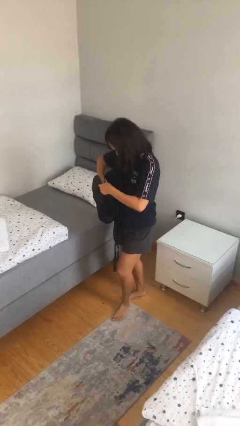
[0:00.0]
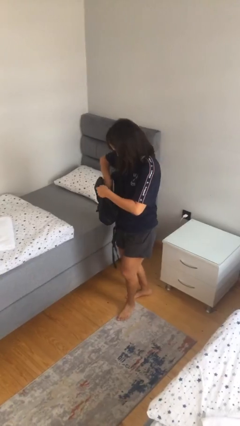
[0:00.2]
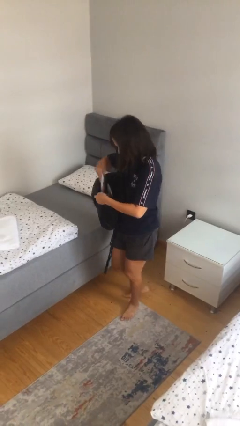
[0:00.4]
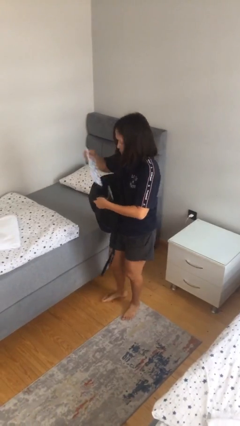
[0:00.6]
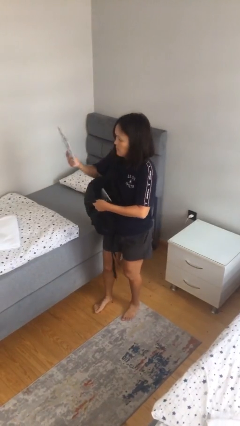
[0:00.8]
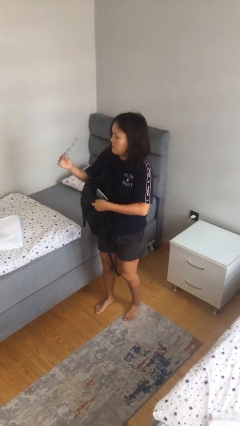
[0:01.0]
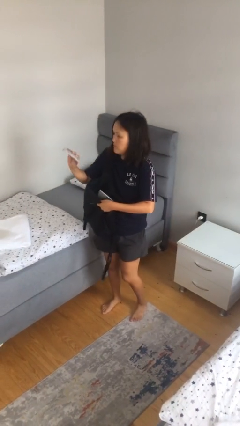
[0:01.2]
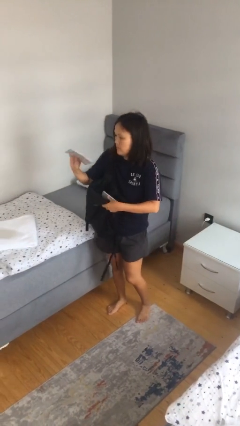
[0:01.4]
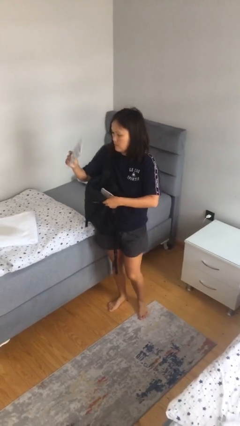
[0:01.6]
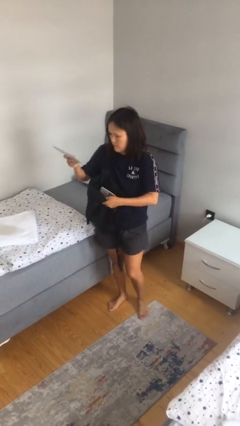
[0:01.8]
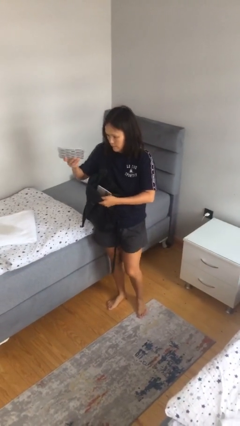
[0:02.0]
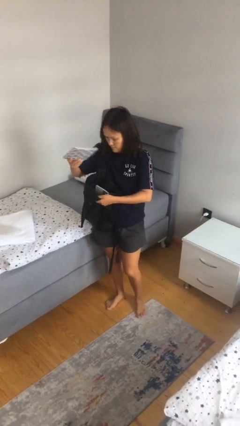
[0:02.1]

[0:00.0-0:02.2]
person takes object from backpack

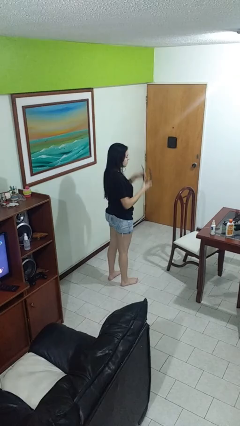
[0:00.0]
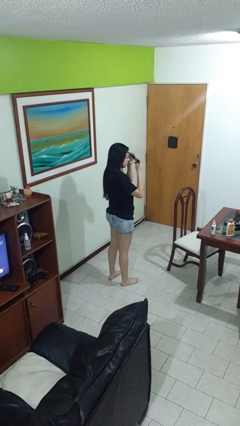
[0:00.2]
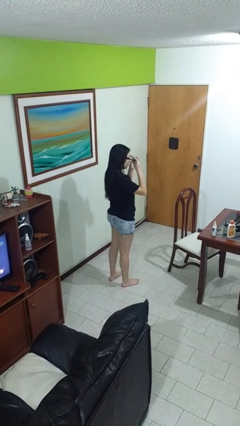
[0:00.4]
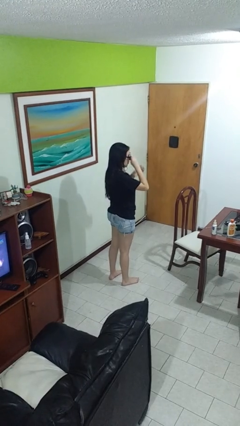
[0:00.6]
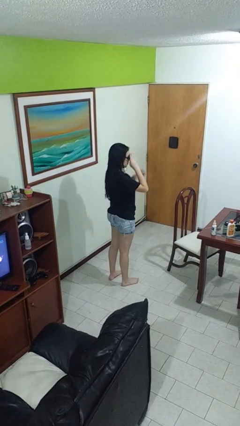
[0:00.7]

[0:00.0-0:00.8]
person puts on sunglasses

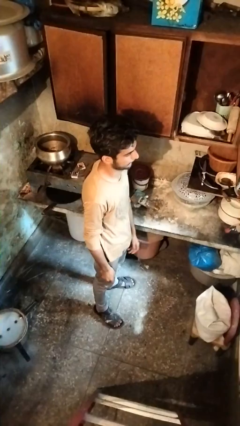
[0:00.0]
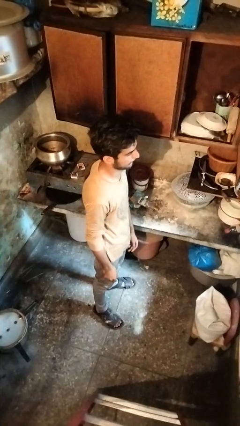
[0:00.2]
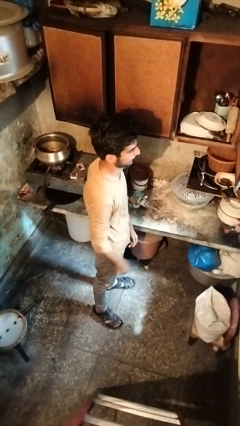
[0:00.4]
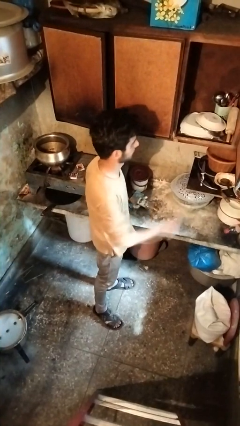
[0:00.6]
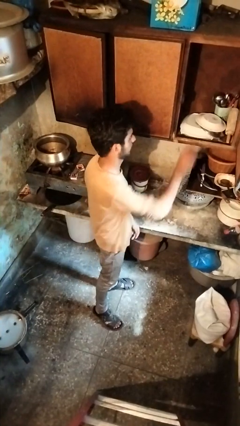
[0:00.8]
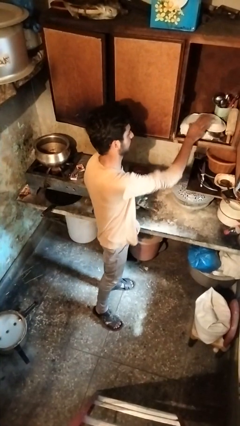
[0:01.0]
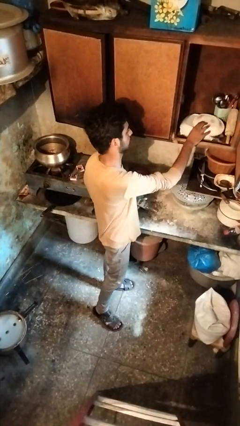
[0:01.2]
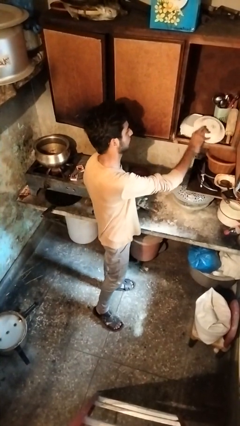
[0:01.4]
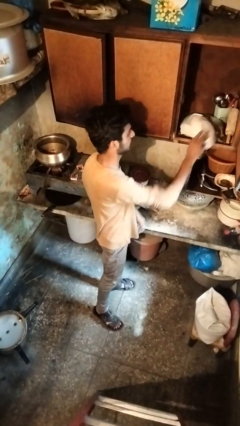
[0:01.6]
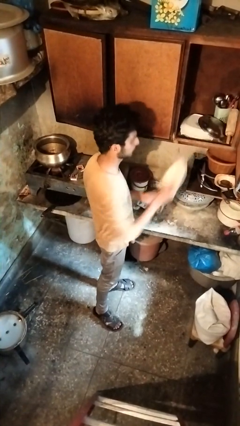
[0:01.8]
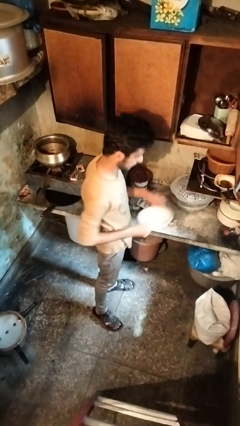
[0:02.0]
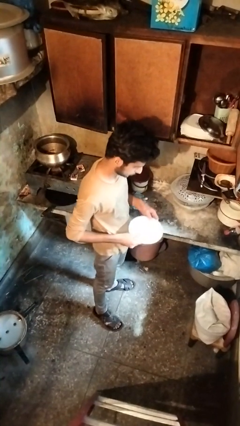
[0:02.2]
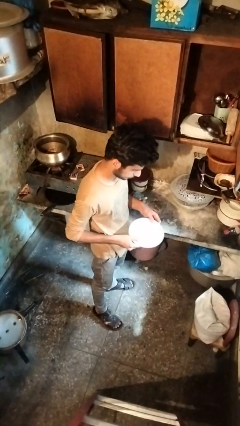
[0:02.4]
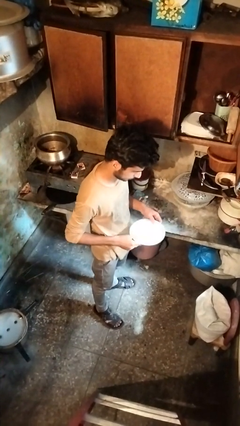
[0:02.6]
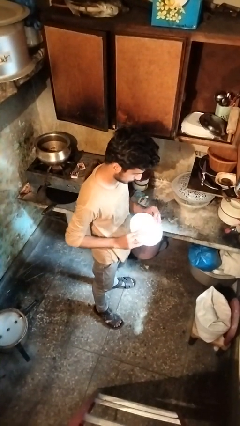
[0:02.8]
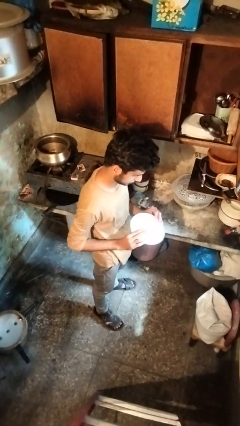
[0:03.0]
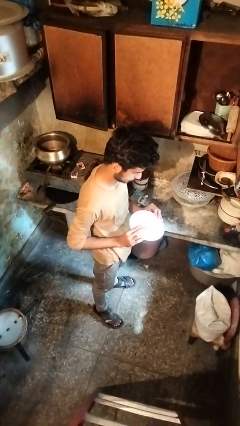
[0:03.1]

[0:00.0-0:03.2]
person picks up object from cabinet

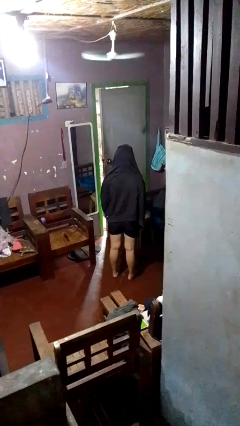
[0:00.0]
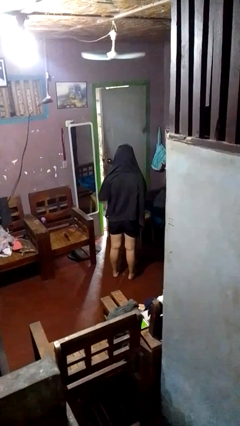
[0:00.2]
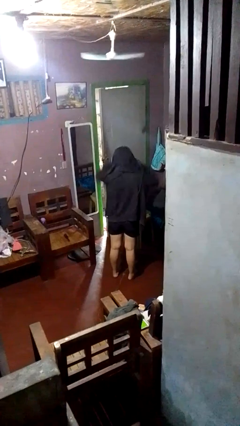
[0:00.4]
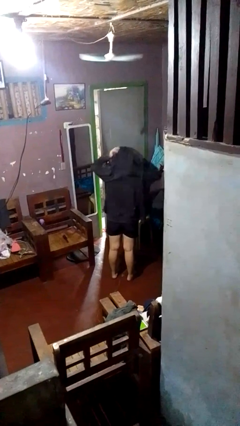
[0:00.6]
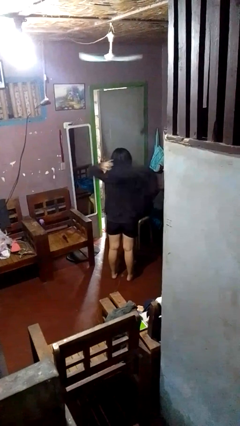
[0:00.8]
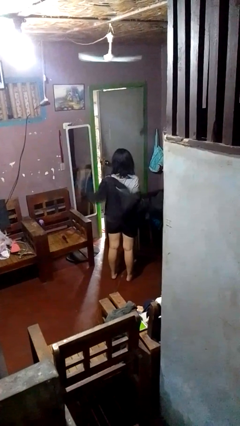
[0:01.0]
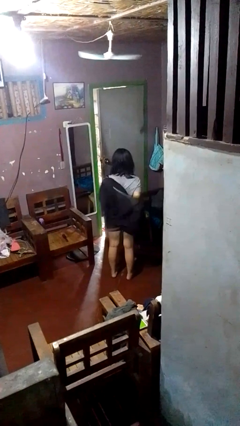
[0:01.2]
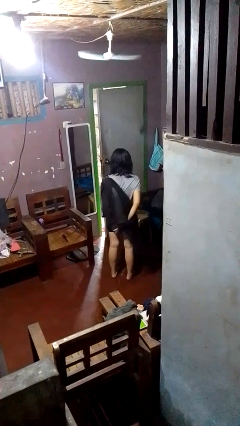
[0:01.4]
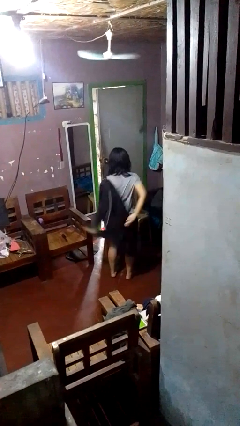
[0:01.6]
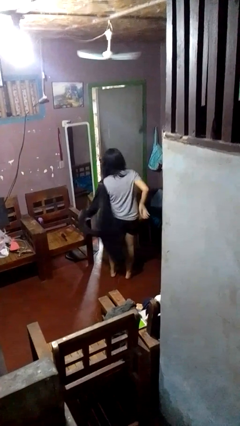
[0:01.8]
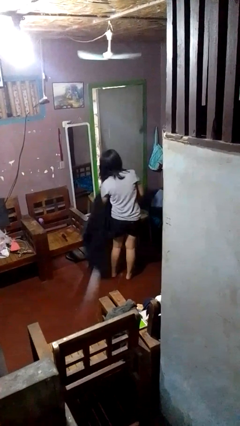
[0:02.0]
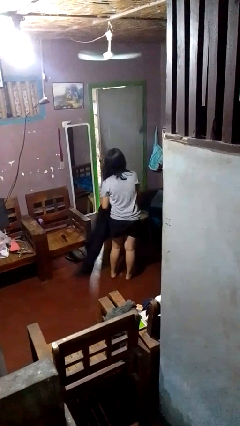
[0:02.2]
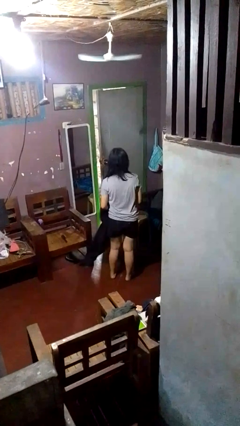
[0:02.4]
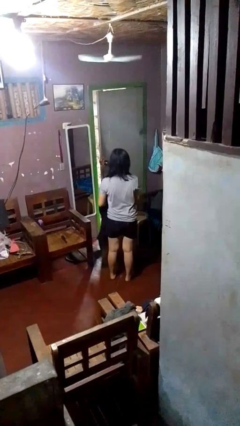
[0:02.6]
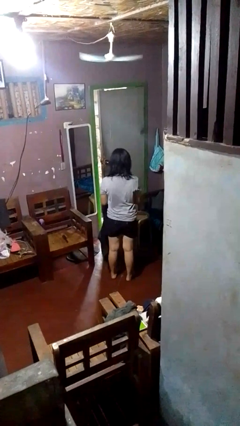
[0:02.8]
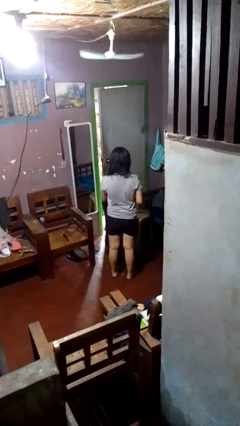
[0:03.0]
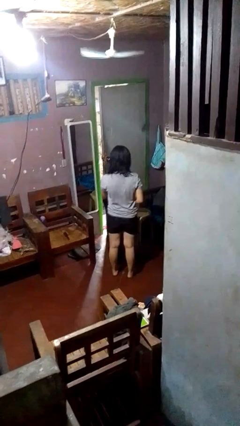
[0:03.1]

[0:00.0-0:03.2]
person takes off hoodie

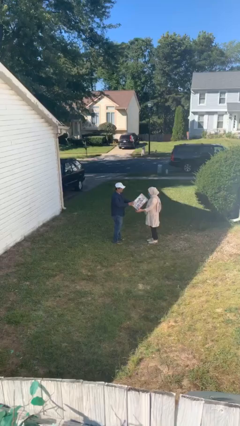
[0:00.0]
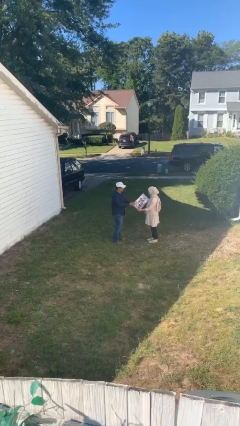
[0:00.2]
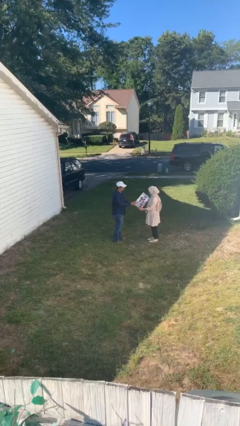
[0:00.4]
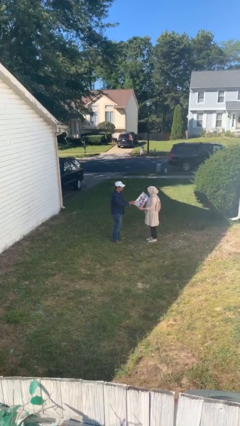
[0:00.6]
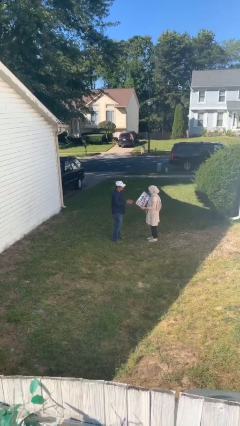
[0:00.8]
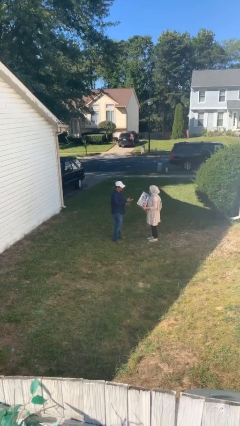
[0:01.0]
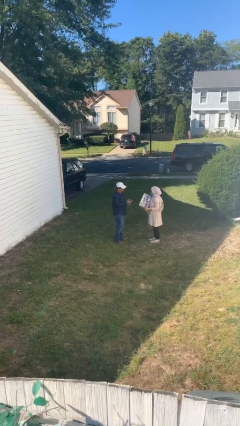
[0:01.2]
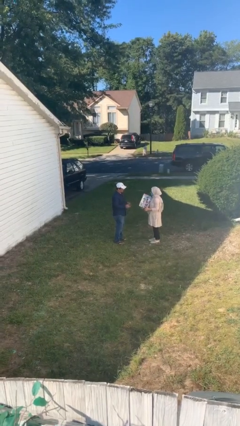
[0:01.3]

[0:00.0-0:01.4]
person transfers object to person

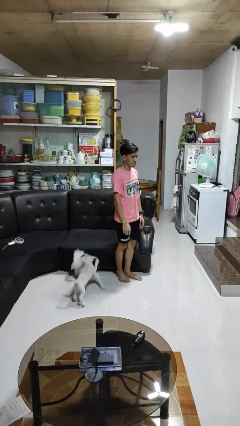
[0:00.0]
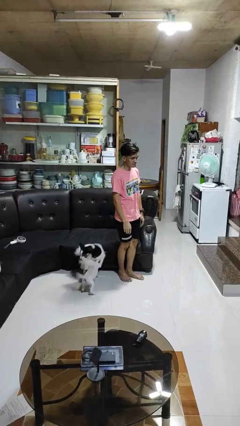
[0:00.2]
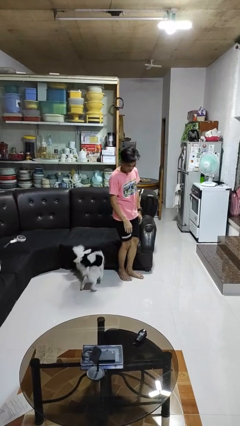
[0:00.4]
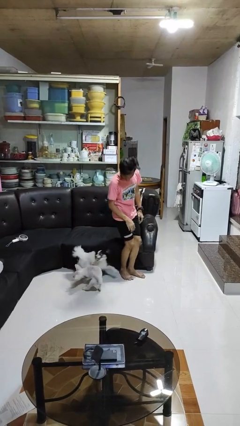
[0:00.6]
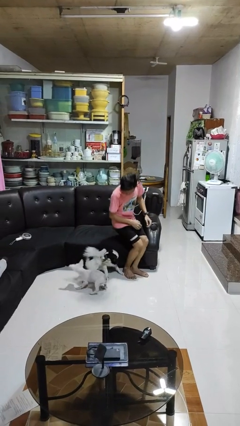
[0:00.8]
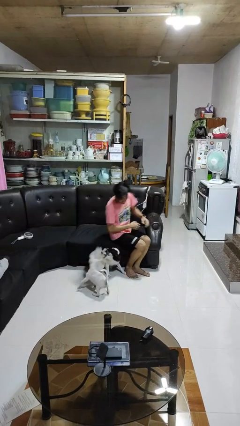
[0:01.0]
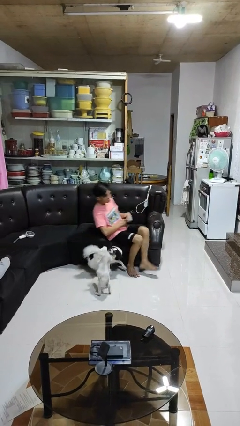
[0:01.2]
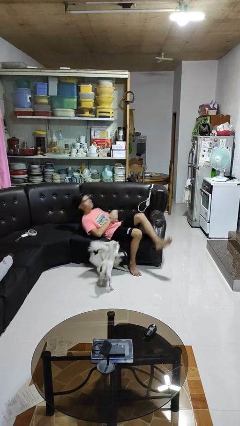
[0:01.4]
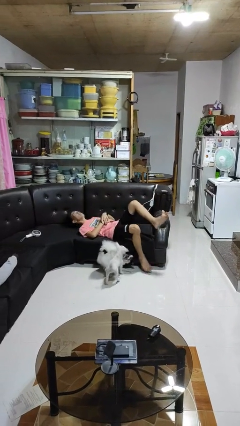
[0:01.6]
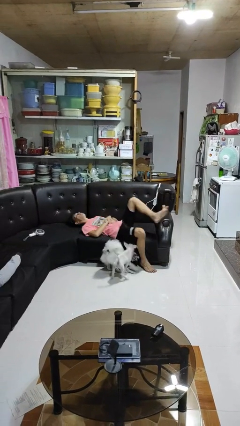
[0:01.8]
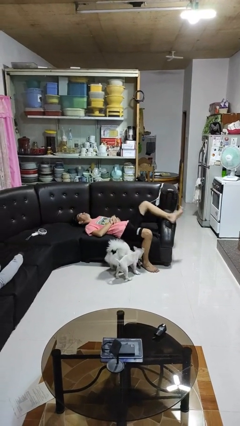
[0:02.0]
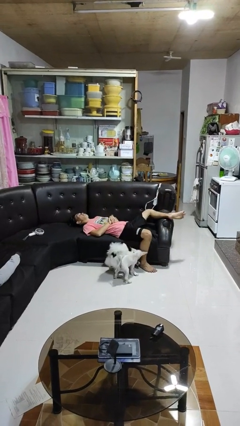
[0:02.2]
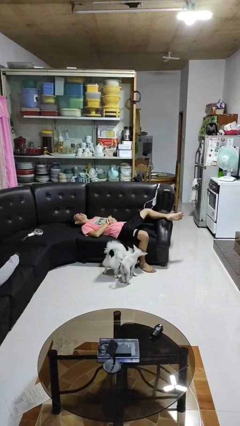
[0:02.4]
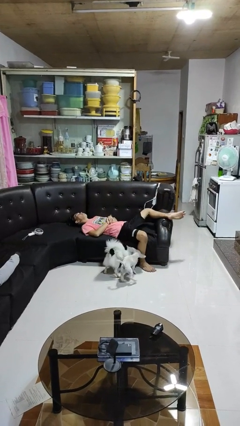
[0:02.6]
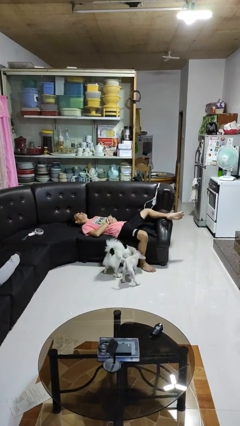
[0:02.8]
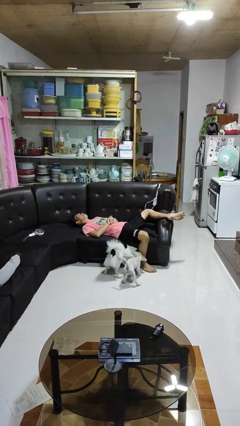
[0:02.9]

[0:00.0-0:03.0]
person lies down on couch

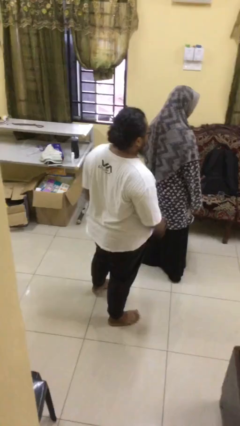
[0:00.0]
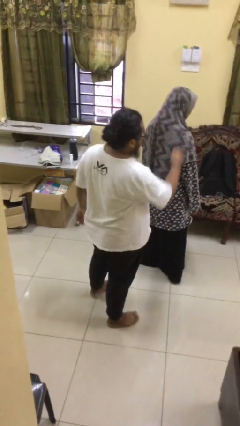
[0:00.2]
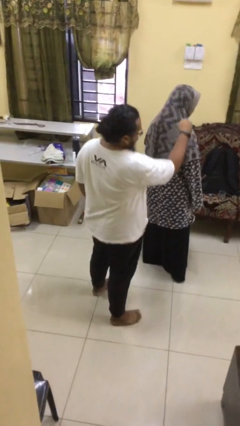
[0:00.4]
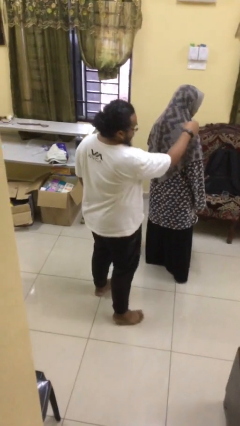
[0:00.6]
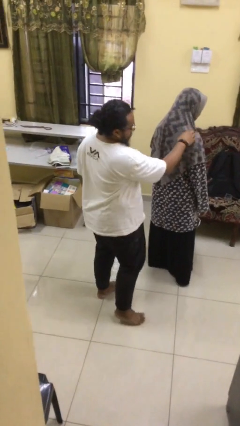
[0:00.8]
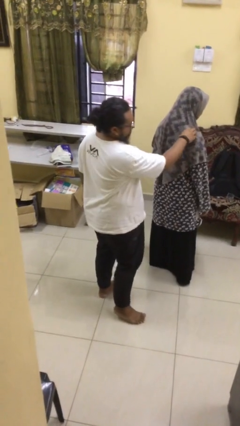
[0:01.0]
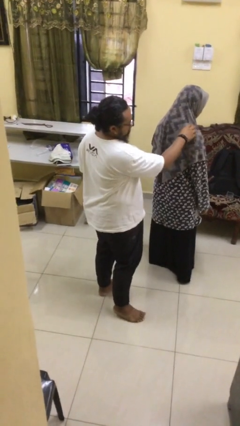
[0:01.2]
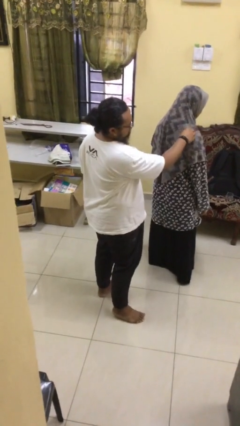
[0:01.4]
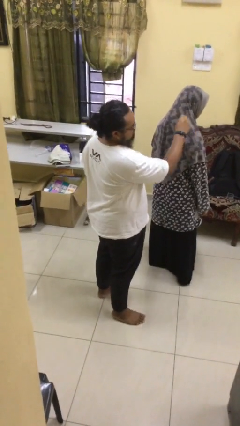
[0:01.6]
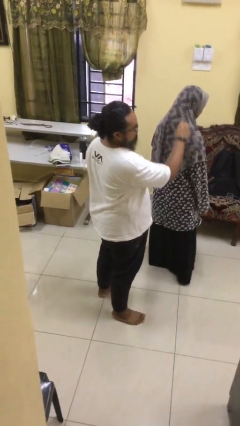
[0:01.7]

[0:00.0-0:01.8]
person touches back of person

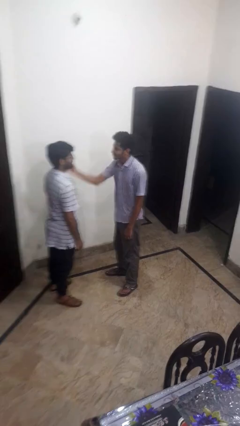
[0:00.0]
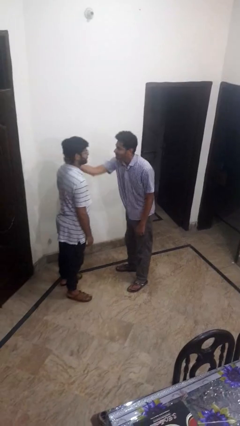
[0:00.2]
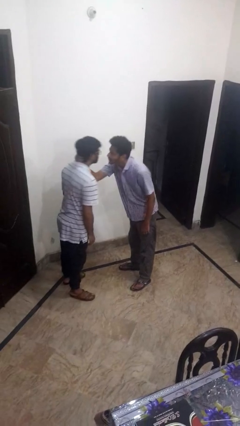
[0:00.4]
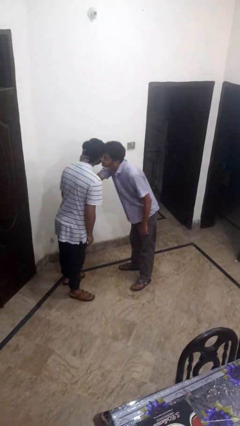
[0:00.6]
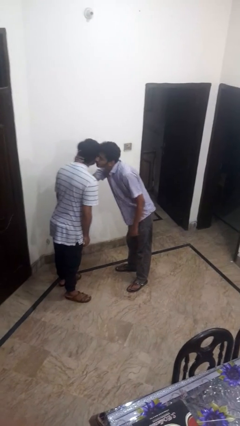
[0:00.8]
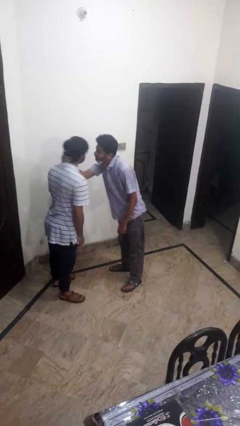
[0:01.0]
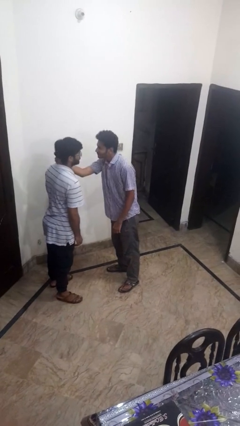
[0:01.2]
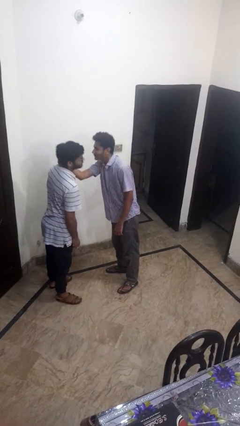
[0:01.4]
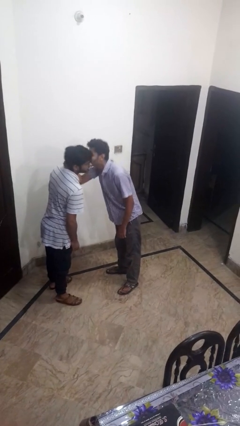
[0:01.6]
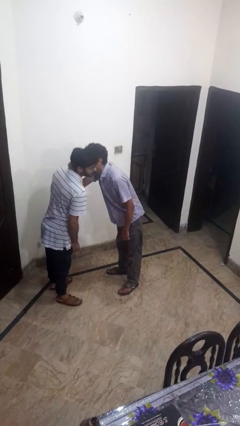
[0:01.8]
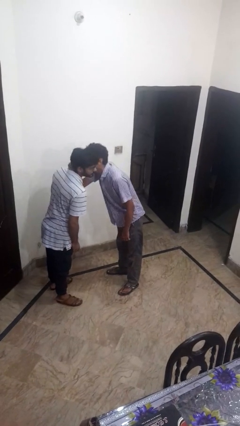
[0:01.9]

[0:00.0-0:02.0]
person grabs person by forearm
